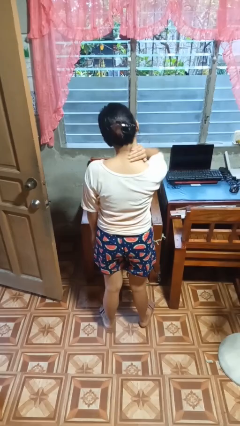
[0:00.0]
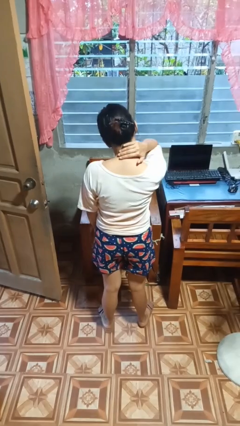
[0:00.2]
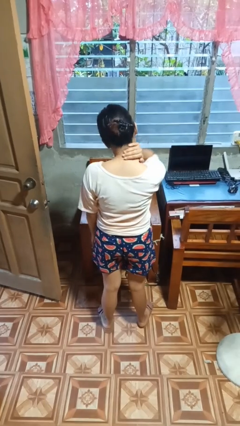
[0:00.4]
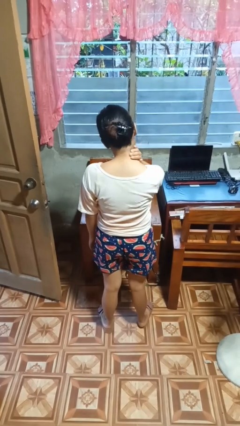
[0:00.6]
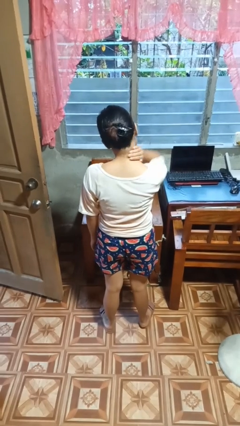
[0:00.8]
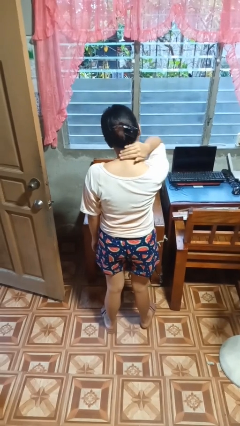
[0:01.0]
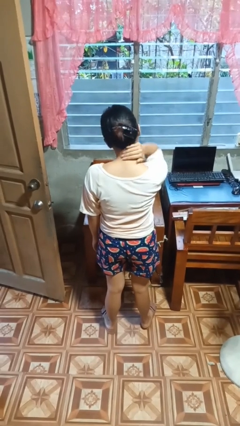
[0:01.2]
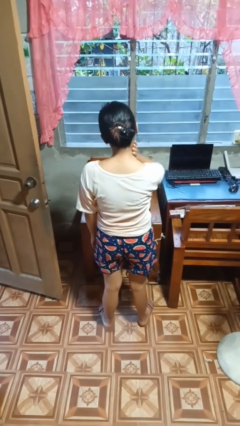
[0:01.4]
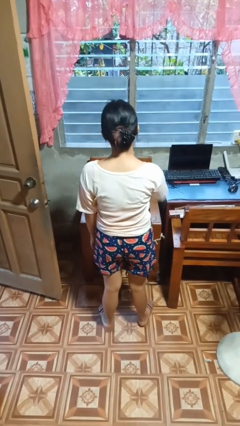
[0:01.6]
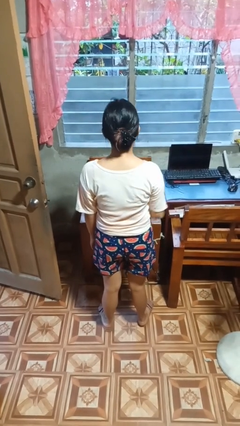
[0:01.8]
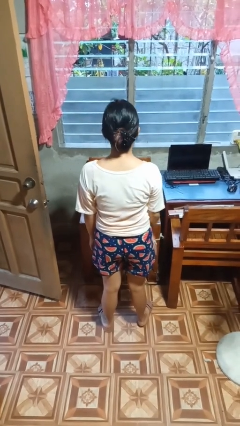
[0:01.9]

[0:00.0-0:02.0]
person rubs neck

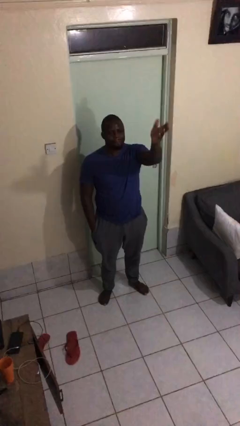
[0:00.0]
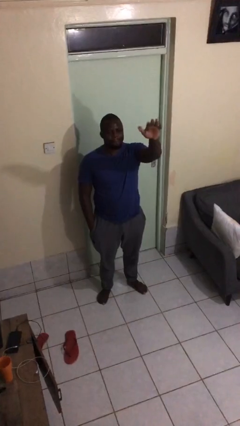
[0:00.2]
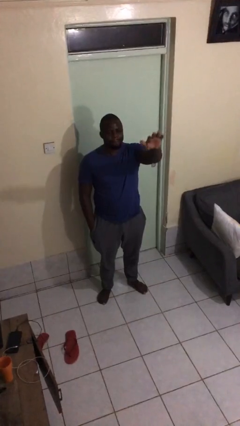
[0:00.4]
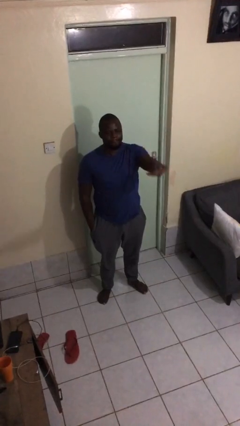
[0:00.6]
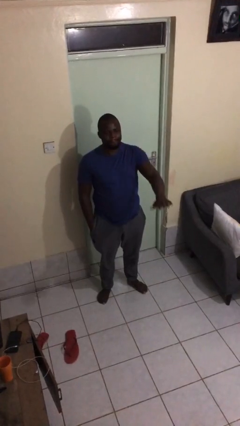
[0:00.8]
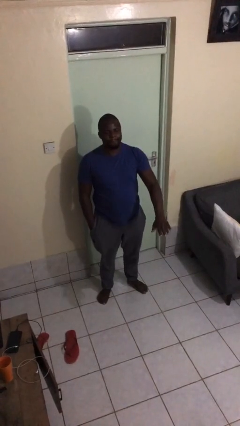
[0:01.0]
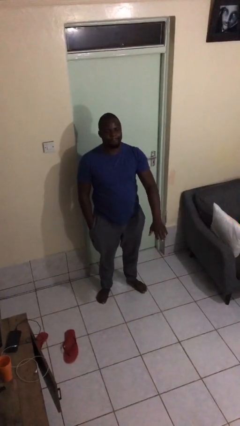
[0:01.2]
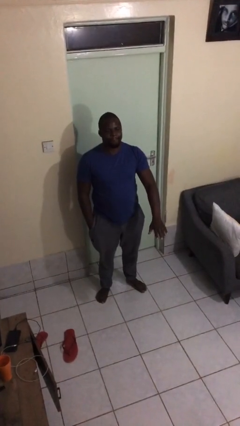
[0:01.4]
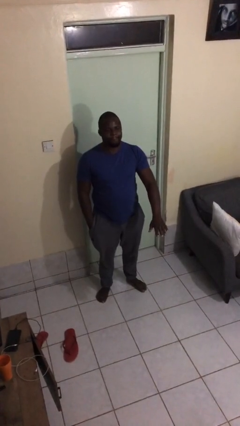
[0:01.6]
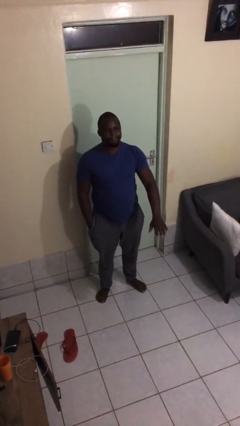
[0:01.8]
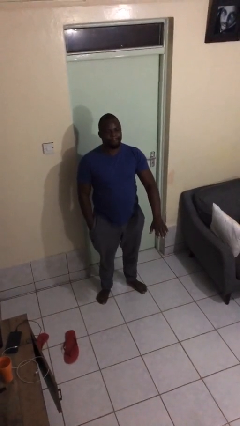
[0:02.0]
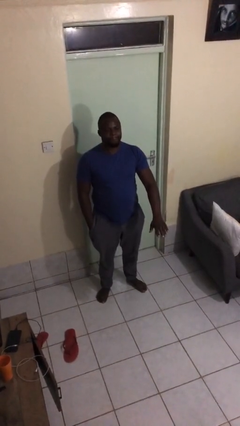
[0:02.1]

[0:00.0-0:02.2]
person gestures swipe down

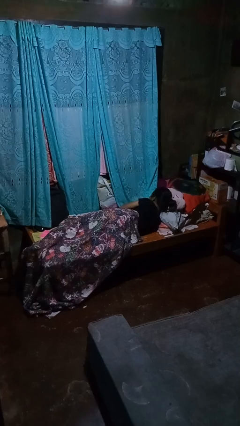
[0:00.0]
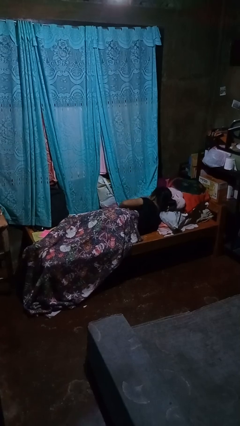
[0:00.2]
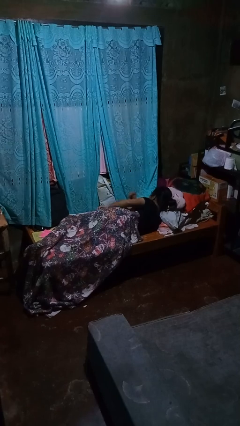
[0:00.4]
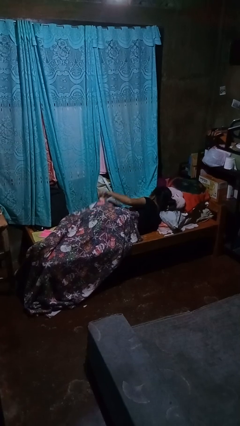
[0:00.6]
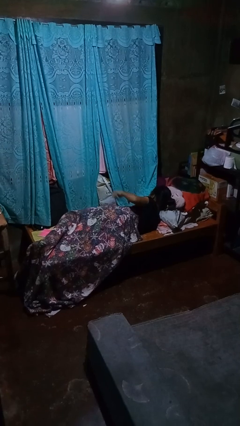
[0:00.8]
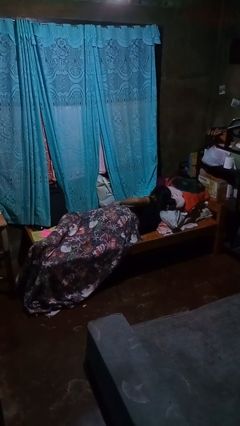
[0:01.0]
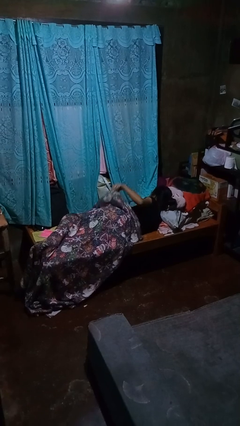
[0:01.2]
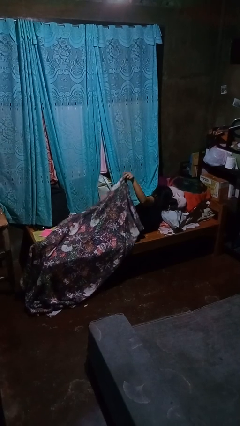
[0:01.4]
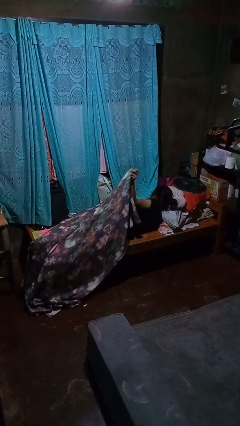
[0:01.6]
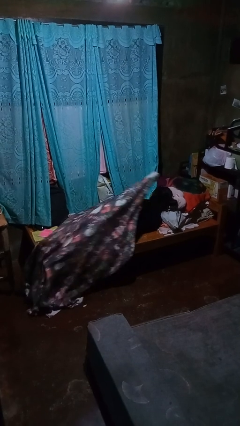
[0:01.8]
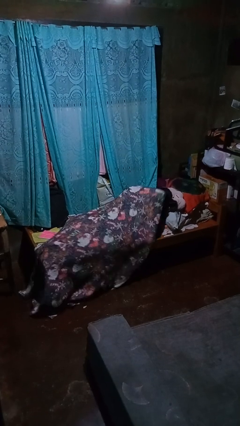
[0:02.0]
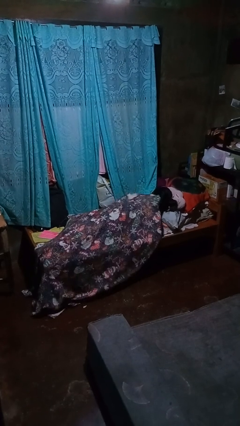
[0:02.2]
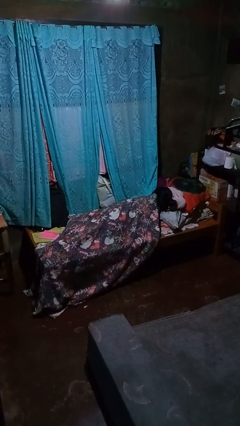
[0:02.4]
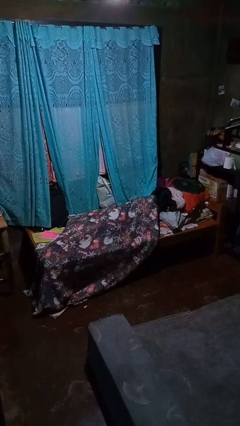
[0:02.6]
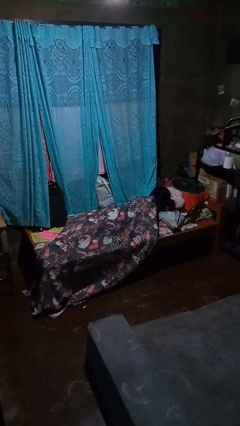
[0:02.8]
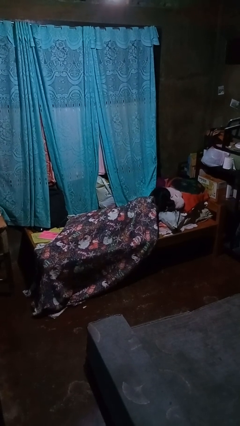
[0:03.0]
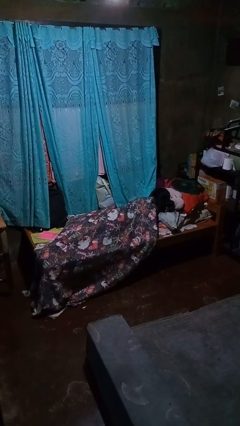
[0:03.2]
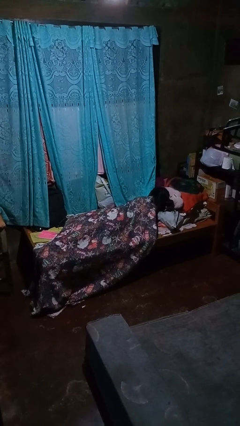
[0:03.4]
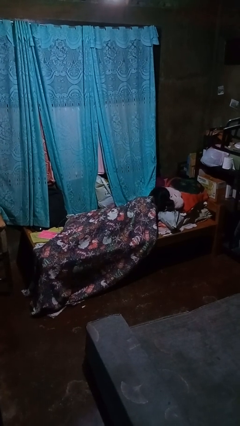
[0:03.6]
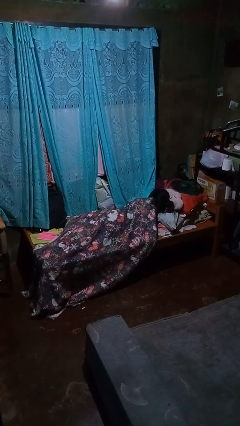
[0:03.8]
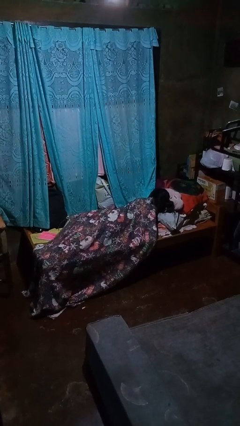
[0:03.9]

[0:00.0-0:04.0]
person covers with bedsheets

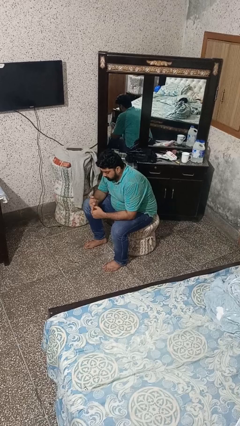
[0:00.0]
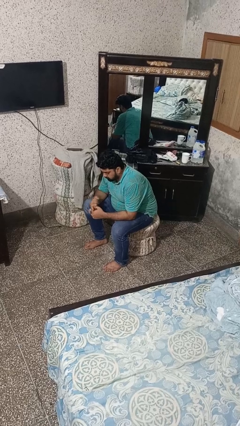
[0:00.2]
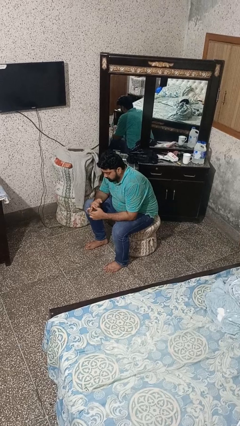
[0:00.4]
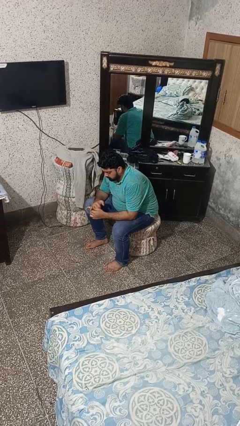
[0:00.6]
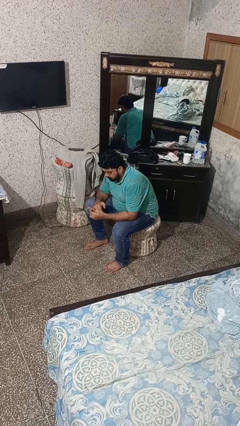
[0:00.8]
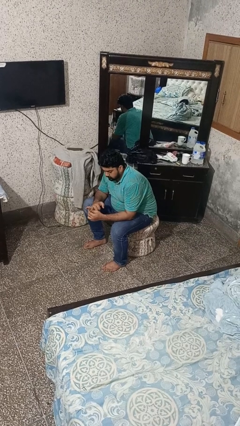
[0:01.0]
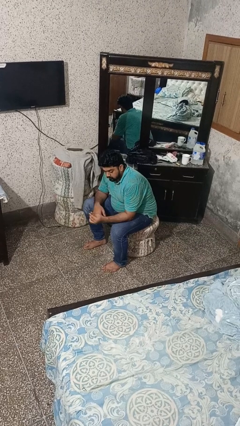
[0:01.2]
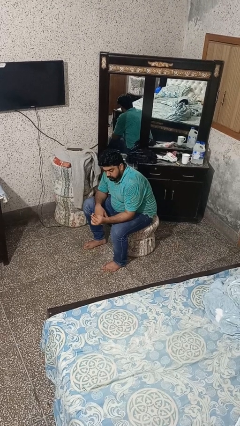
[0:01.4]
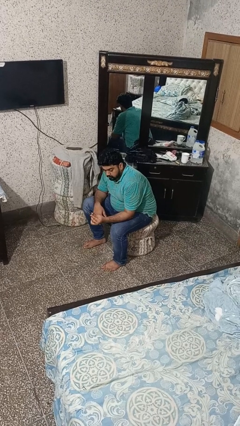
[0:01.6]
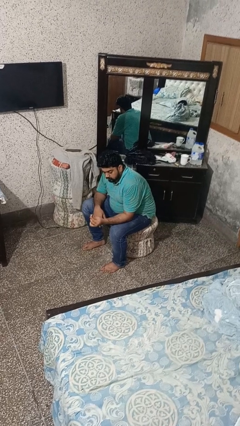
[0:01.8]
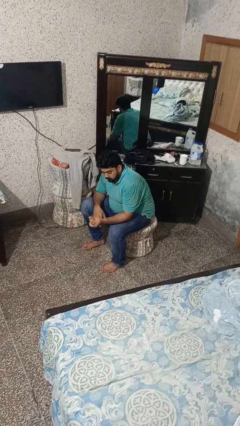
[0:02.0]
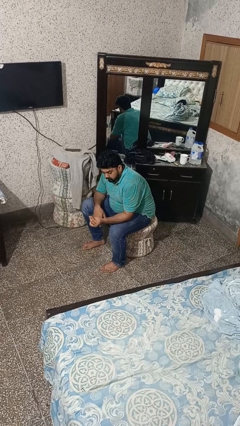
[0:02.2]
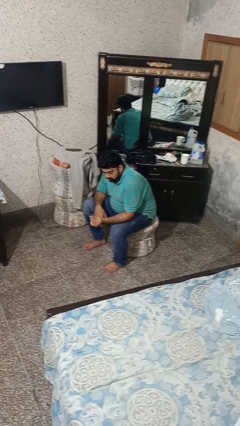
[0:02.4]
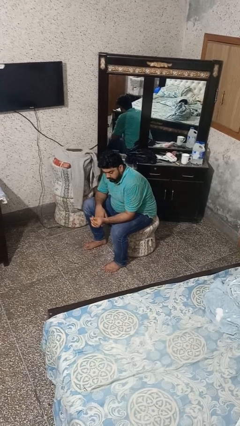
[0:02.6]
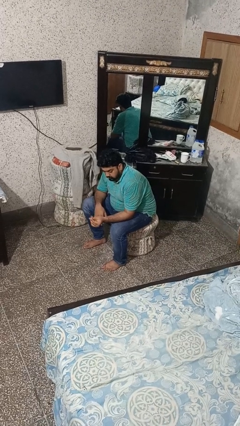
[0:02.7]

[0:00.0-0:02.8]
person takes off ring

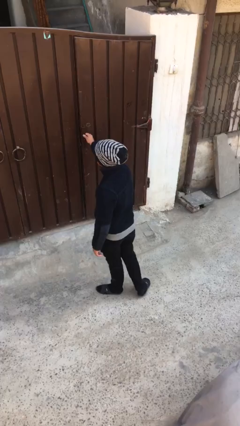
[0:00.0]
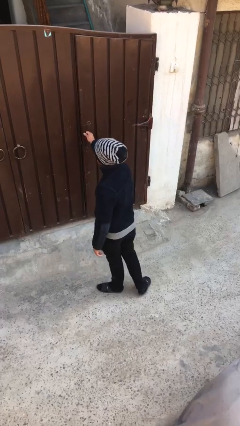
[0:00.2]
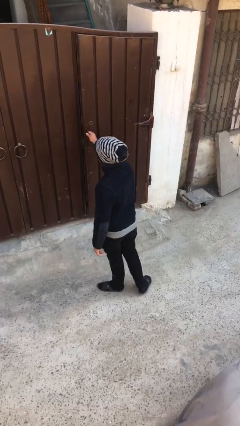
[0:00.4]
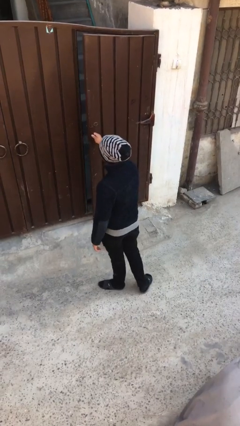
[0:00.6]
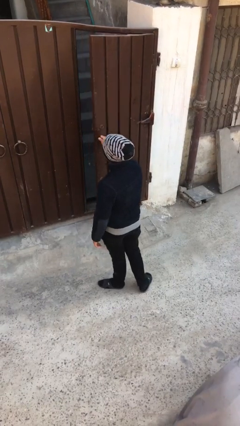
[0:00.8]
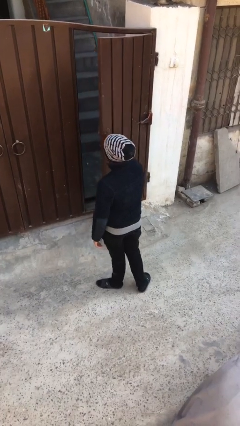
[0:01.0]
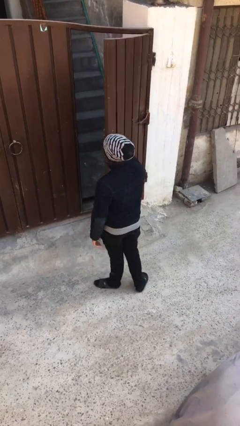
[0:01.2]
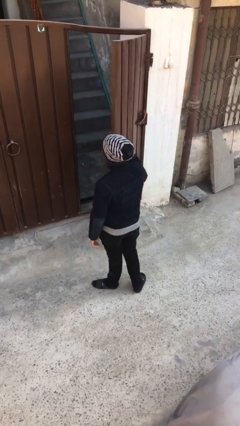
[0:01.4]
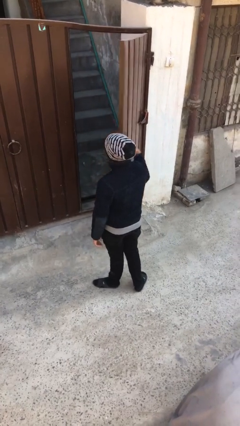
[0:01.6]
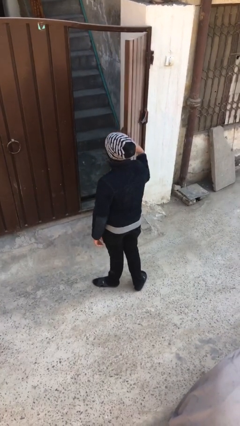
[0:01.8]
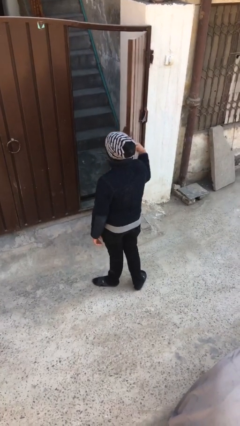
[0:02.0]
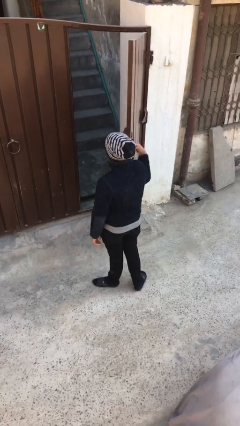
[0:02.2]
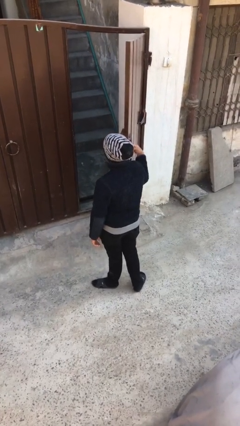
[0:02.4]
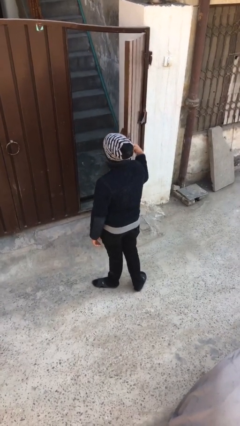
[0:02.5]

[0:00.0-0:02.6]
person opens facility door

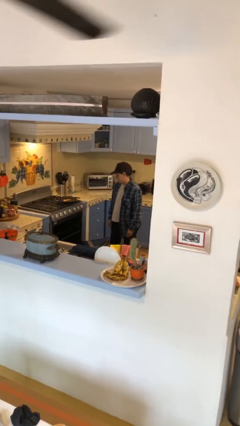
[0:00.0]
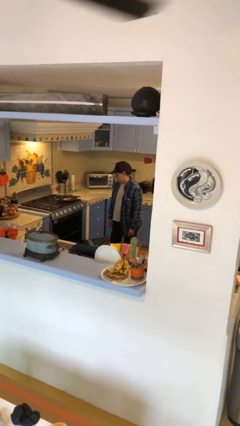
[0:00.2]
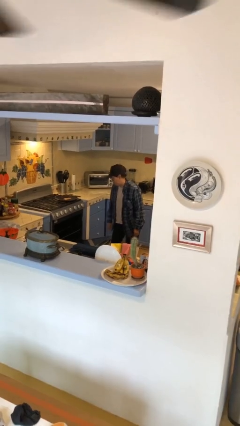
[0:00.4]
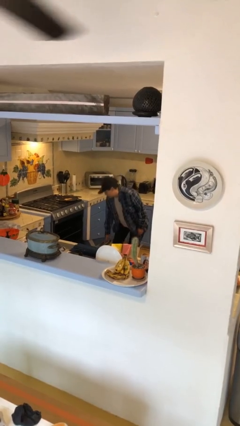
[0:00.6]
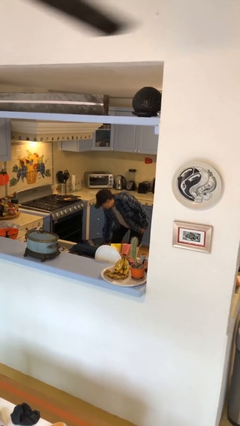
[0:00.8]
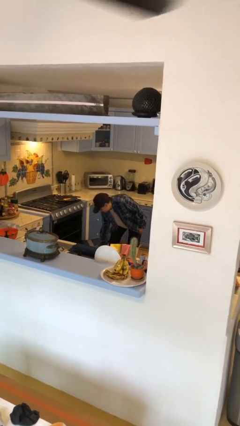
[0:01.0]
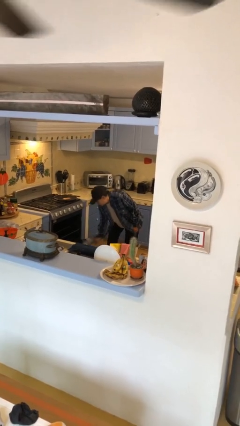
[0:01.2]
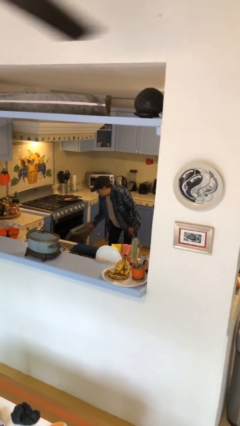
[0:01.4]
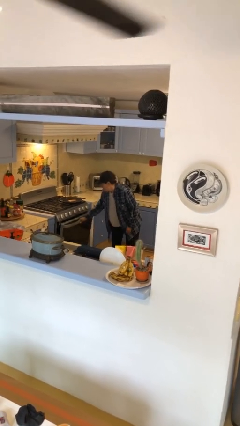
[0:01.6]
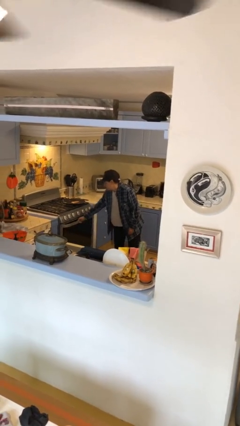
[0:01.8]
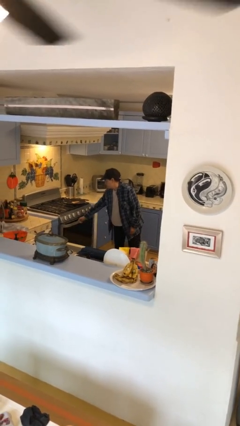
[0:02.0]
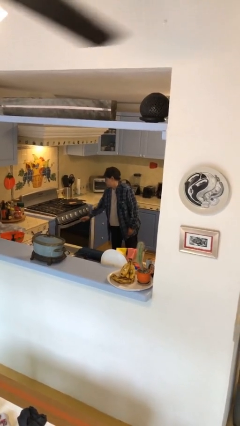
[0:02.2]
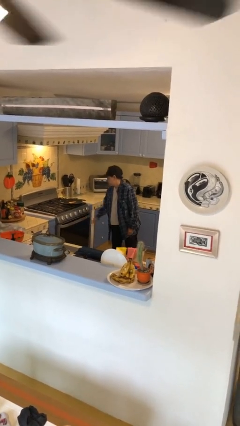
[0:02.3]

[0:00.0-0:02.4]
person takes object from toaster

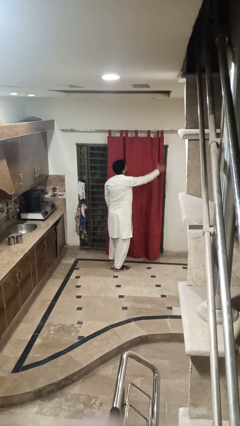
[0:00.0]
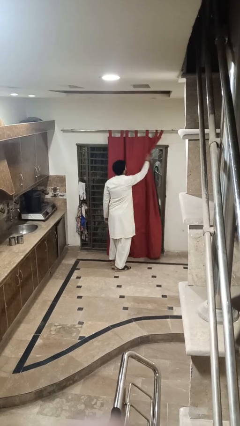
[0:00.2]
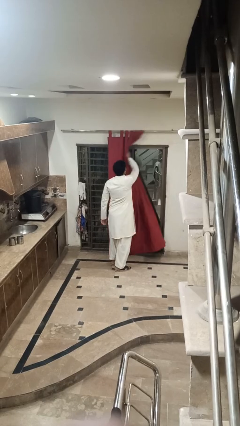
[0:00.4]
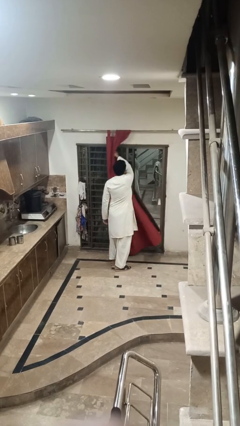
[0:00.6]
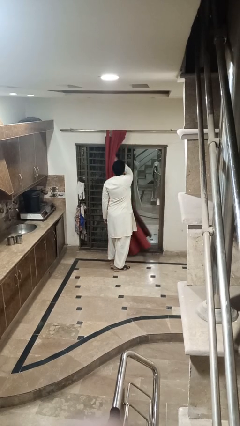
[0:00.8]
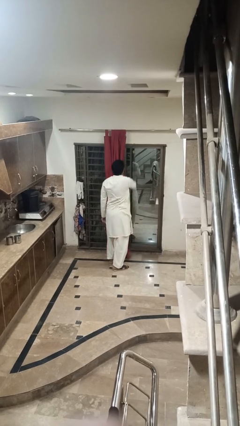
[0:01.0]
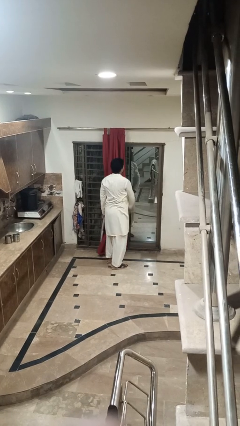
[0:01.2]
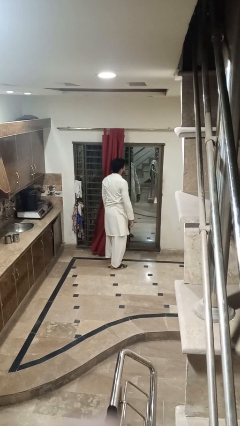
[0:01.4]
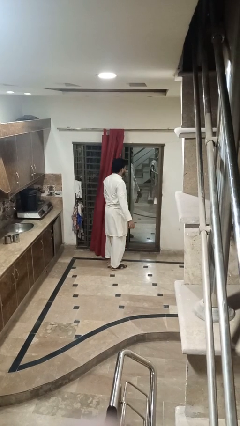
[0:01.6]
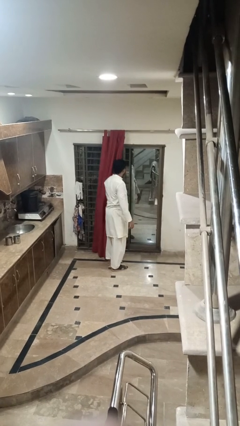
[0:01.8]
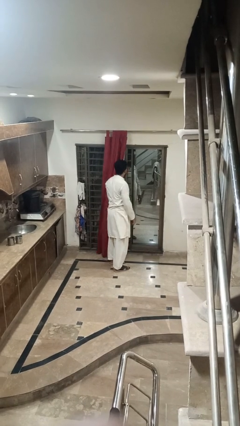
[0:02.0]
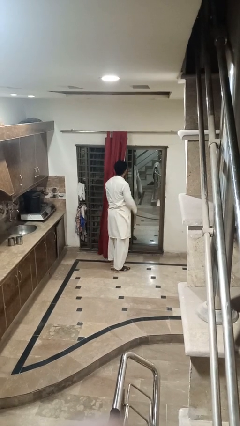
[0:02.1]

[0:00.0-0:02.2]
person opens curtains
